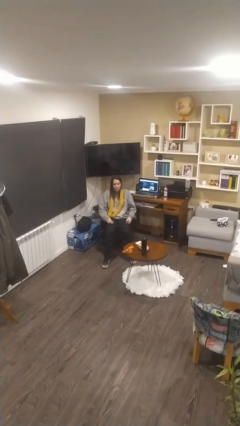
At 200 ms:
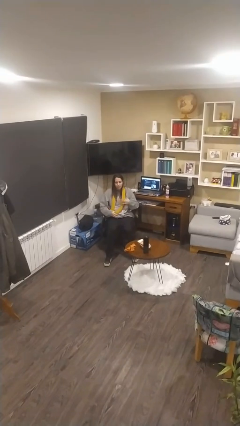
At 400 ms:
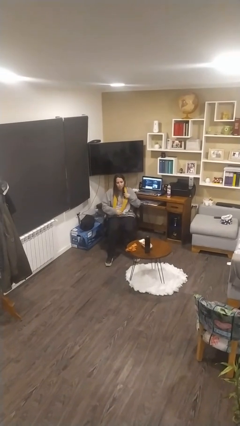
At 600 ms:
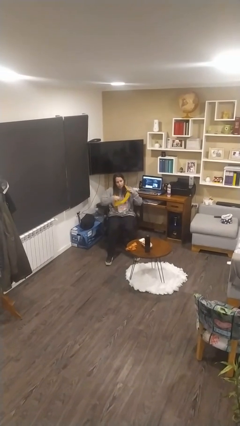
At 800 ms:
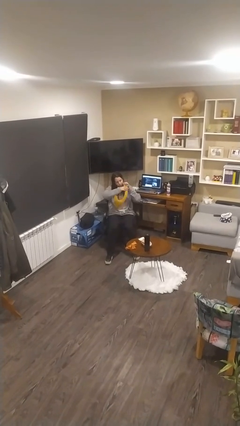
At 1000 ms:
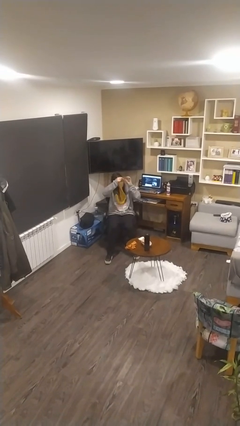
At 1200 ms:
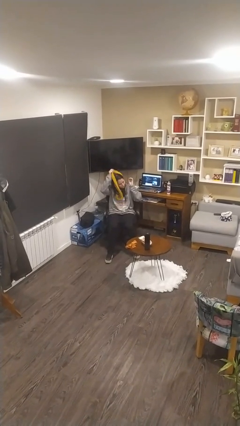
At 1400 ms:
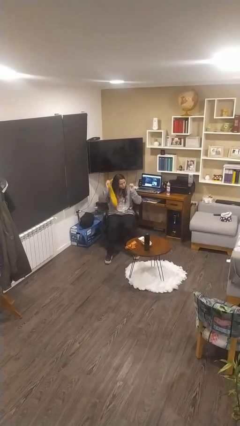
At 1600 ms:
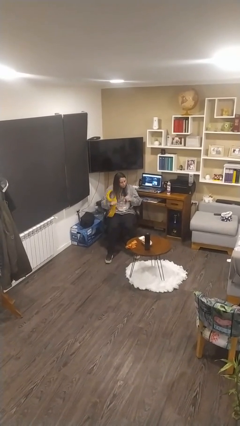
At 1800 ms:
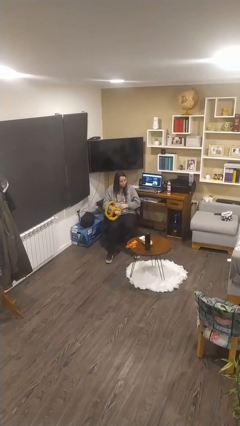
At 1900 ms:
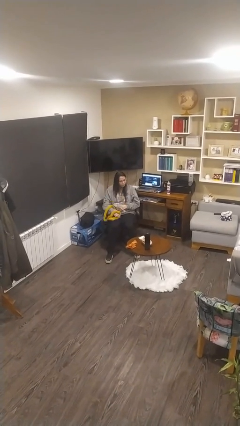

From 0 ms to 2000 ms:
person takes off scarf

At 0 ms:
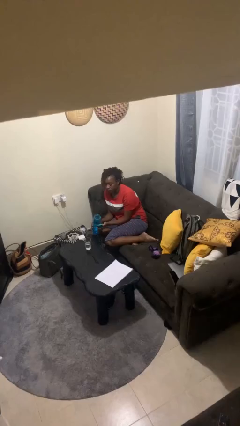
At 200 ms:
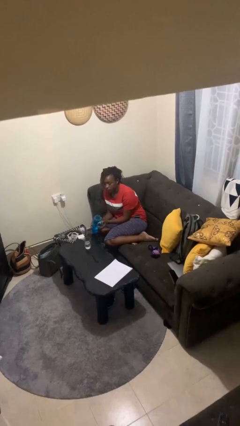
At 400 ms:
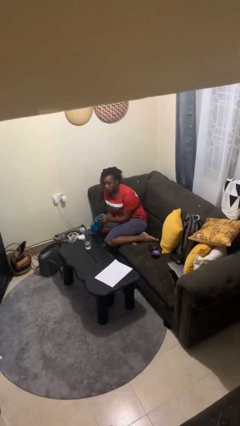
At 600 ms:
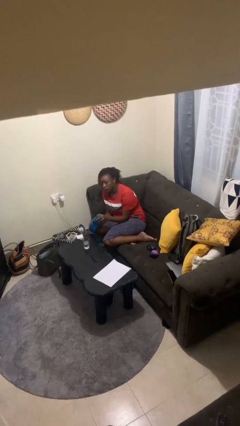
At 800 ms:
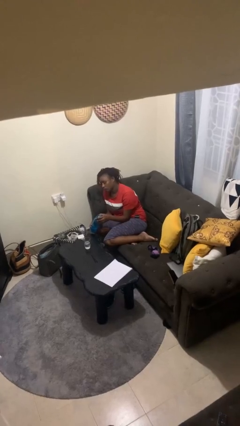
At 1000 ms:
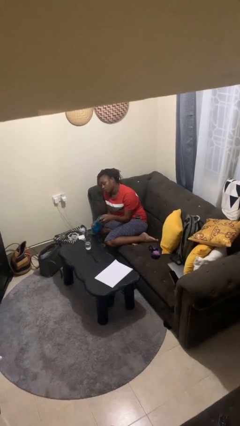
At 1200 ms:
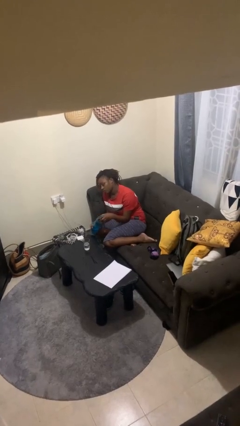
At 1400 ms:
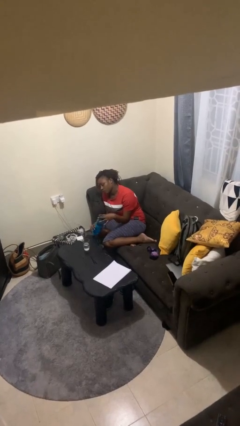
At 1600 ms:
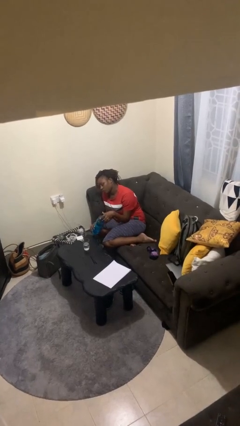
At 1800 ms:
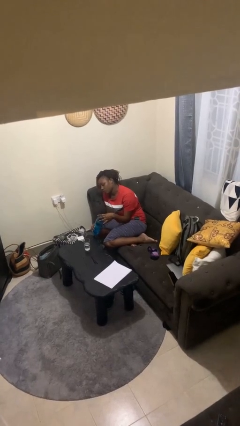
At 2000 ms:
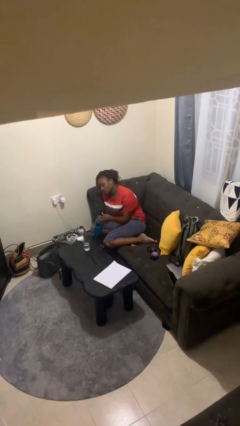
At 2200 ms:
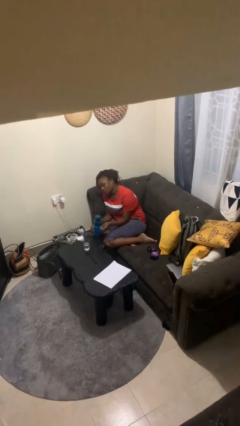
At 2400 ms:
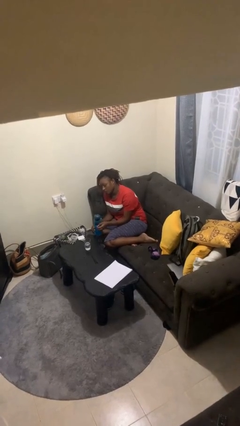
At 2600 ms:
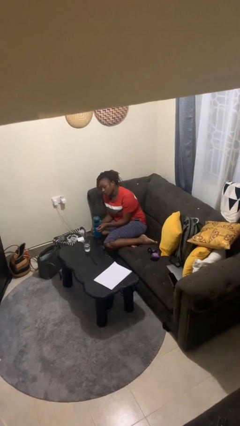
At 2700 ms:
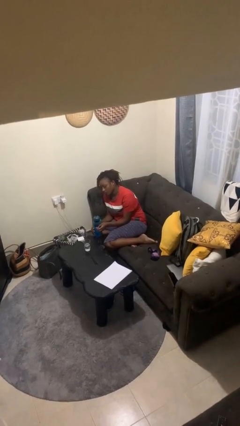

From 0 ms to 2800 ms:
person screws lid to bottle

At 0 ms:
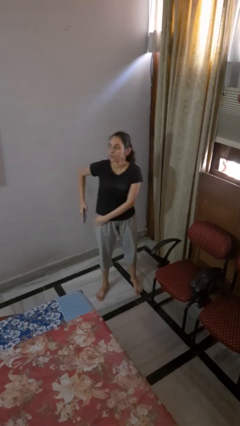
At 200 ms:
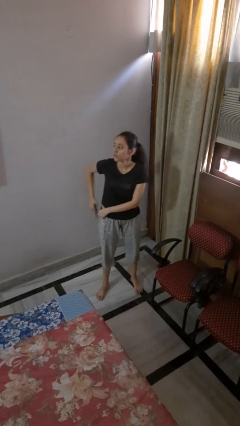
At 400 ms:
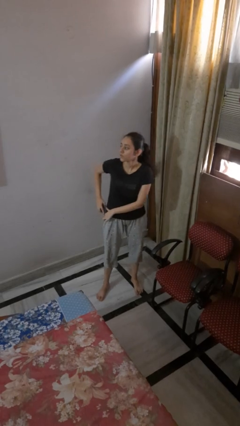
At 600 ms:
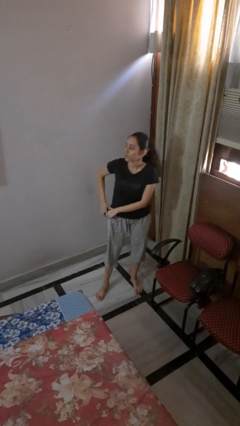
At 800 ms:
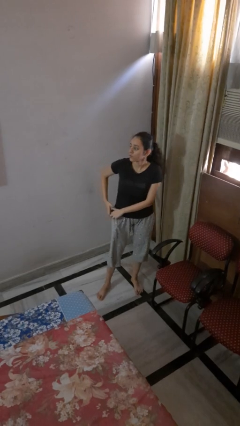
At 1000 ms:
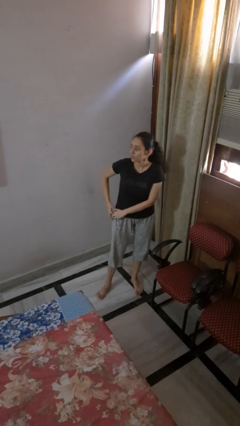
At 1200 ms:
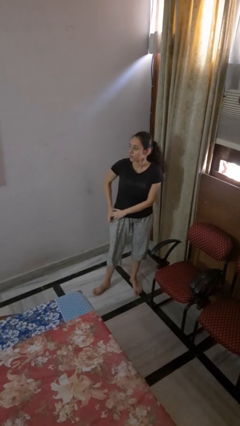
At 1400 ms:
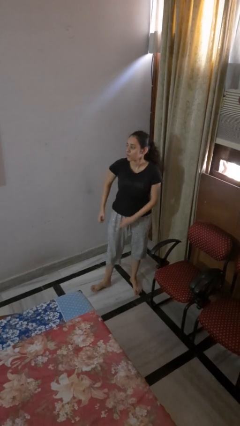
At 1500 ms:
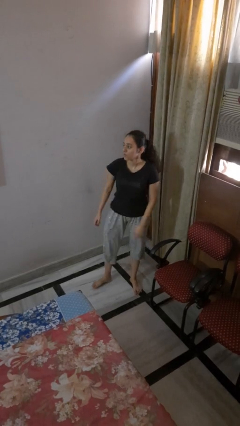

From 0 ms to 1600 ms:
person puts phone into pocket

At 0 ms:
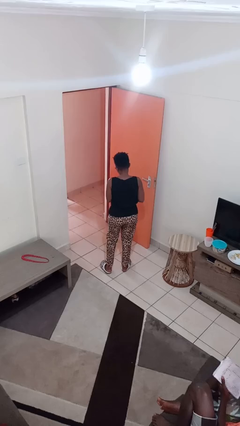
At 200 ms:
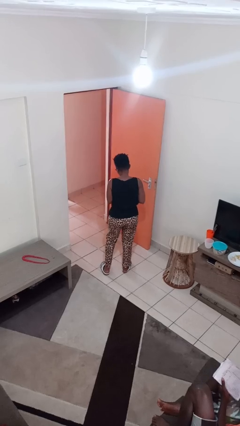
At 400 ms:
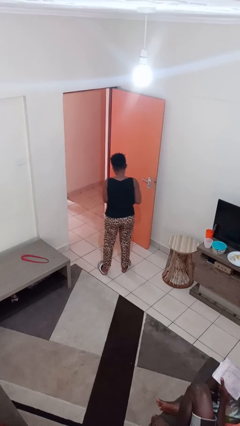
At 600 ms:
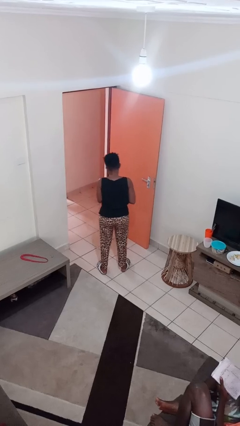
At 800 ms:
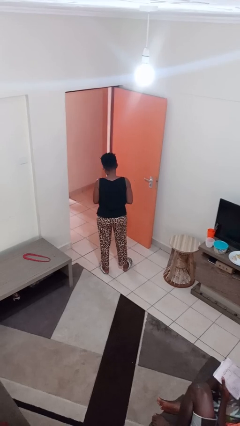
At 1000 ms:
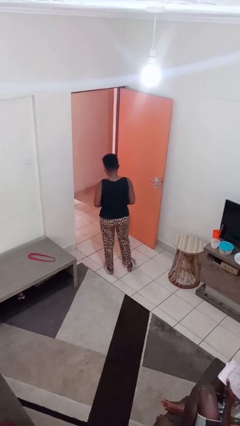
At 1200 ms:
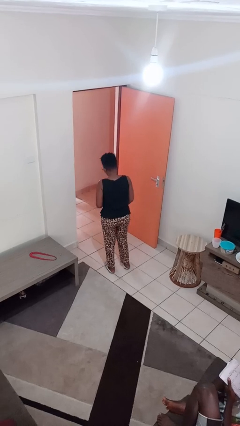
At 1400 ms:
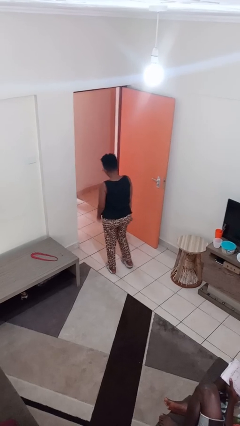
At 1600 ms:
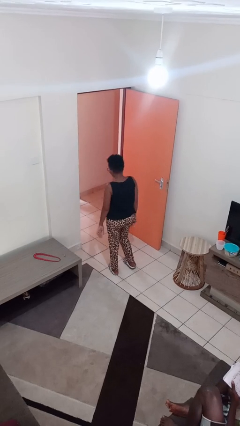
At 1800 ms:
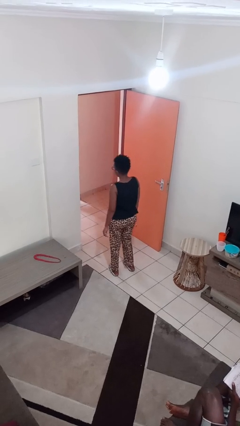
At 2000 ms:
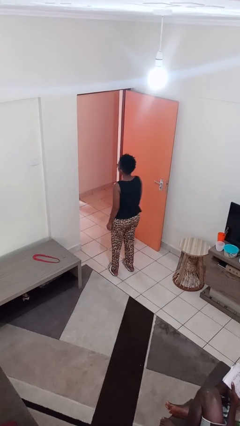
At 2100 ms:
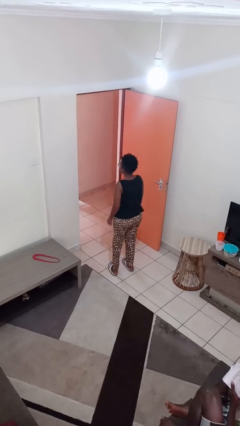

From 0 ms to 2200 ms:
person takes off wristwatch

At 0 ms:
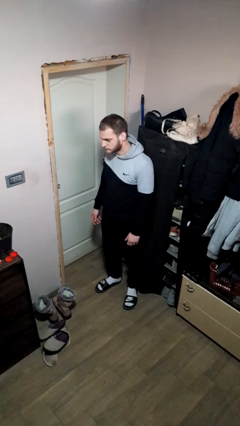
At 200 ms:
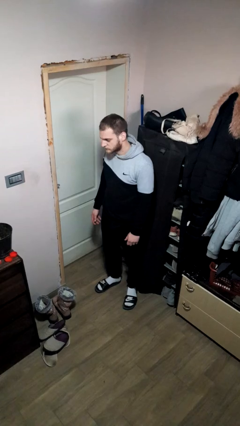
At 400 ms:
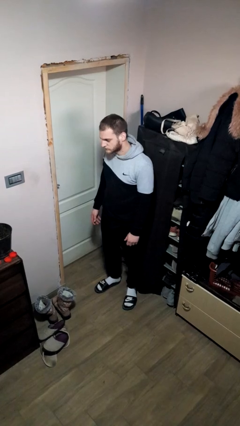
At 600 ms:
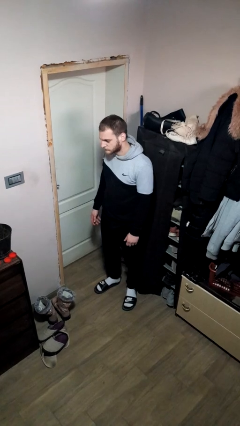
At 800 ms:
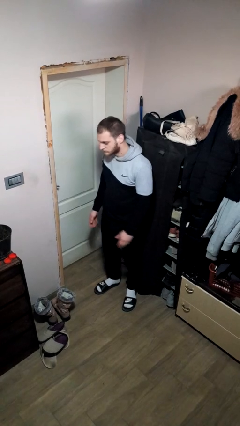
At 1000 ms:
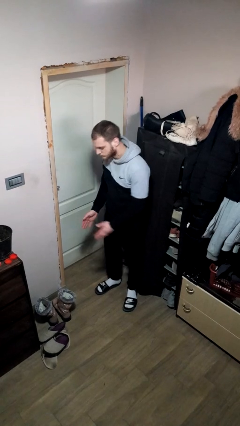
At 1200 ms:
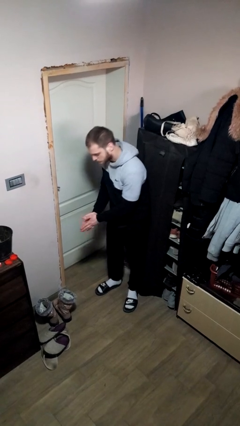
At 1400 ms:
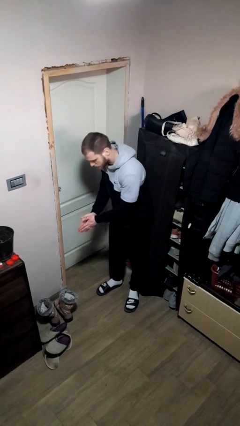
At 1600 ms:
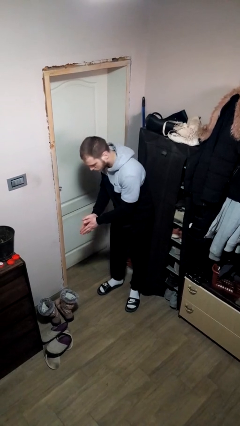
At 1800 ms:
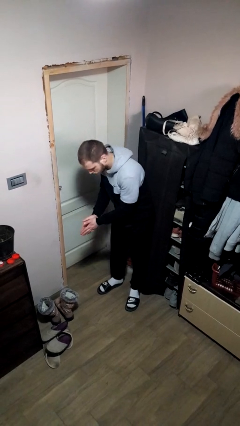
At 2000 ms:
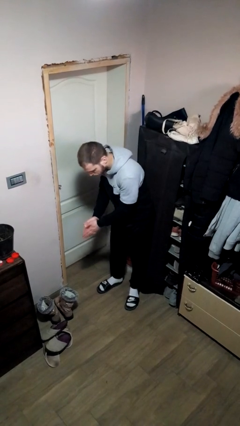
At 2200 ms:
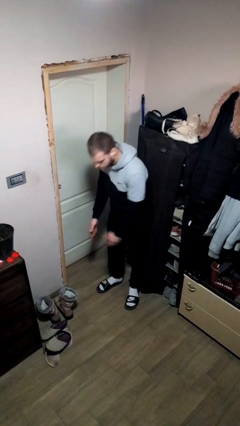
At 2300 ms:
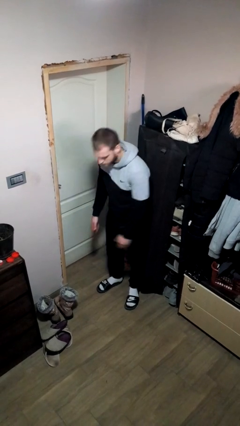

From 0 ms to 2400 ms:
person claps hands

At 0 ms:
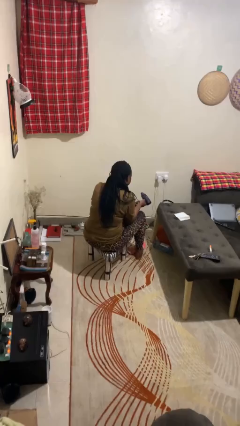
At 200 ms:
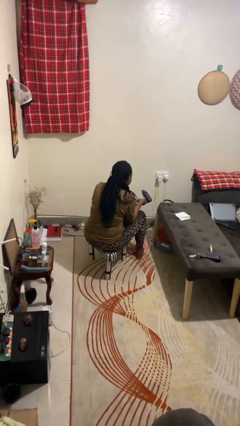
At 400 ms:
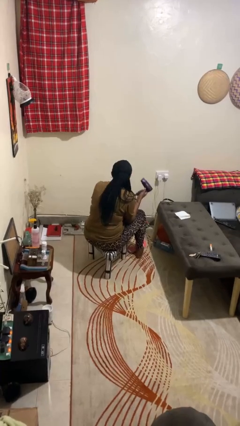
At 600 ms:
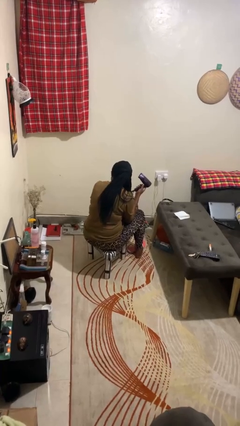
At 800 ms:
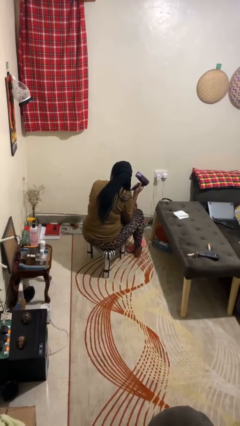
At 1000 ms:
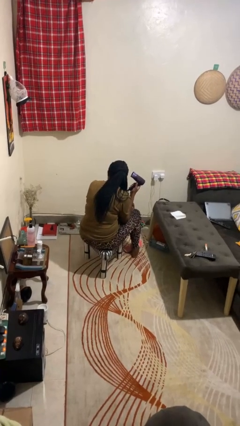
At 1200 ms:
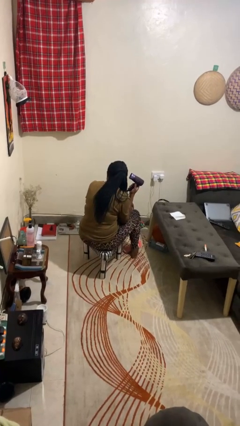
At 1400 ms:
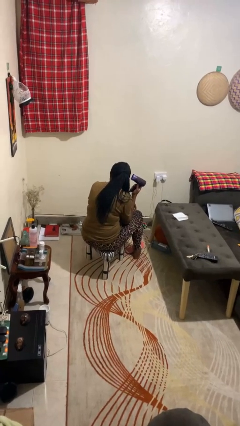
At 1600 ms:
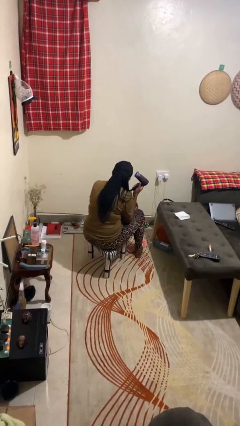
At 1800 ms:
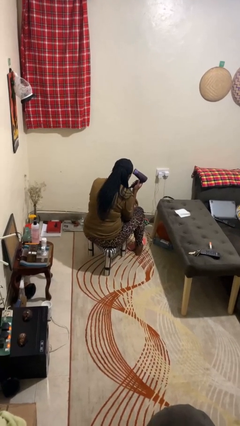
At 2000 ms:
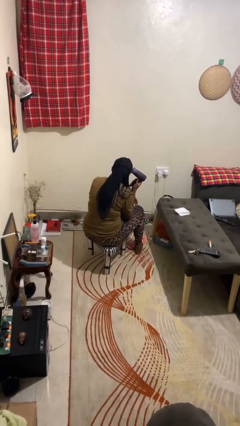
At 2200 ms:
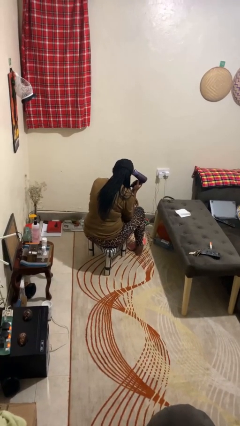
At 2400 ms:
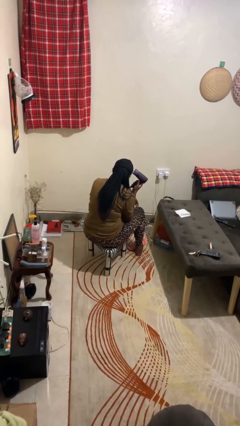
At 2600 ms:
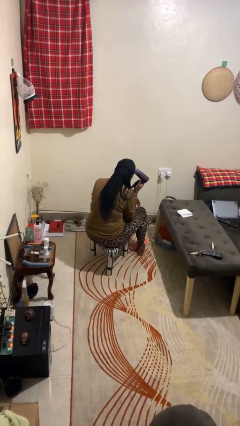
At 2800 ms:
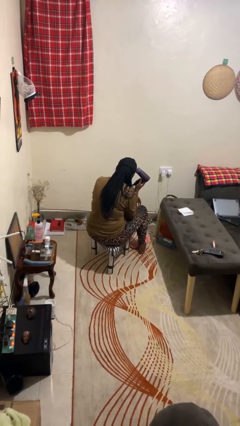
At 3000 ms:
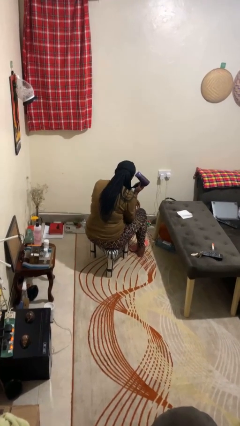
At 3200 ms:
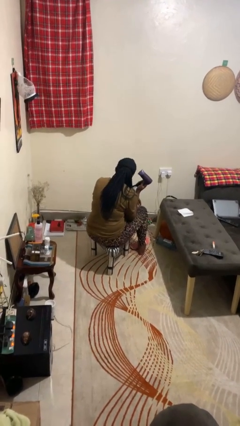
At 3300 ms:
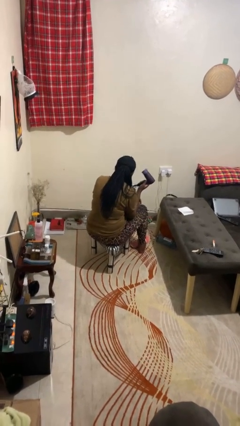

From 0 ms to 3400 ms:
person dries hair with hairdryer

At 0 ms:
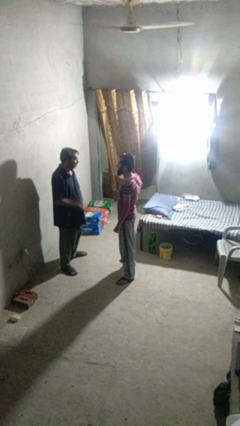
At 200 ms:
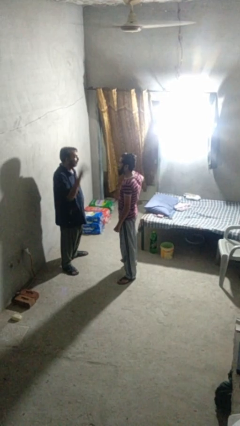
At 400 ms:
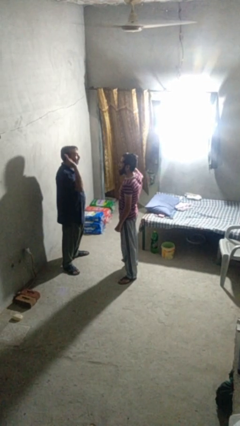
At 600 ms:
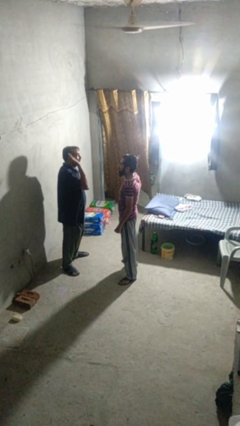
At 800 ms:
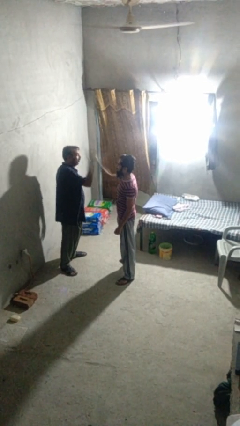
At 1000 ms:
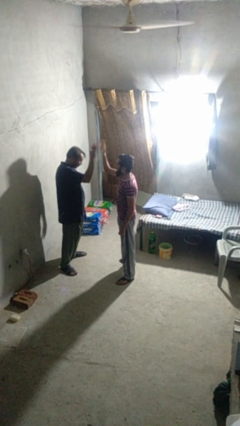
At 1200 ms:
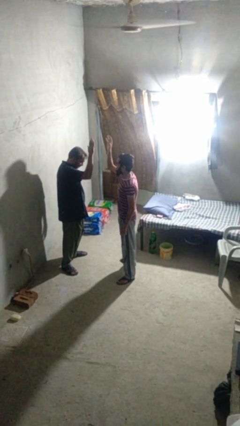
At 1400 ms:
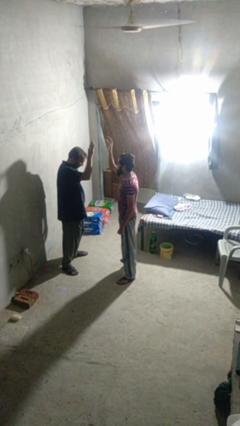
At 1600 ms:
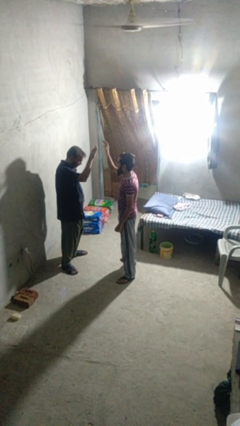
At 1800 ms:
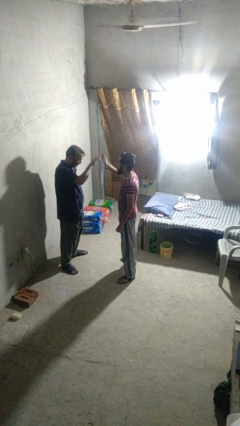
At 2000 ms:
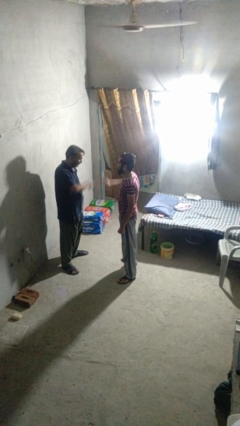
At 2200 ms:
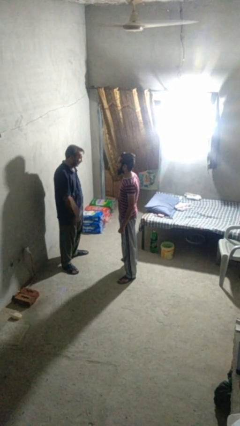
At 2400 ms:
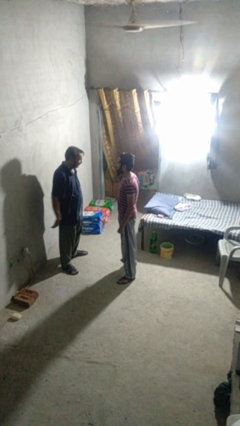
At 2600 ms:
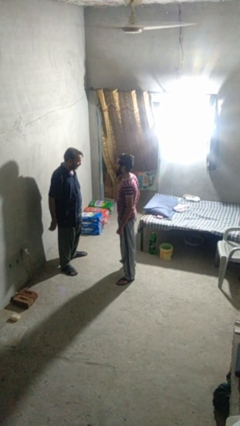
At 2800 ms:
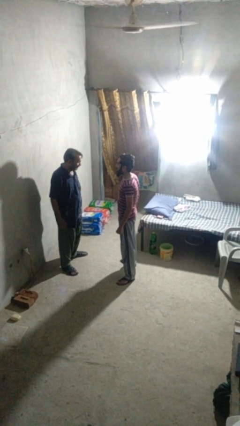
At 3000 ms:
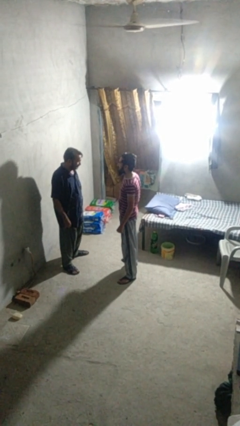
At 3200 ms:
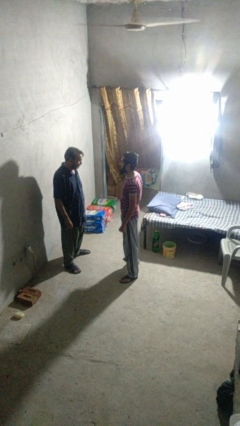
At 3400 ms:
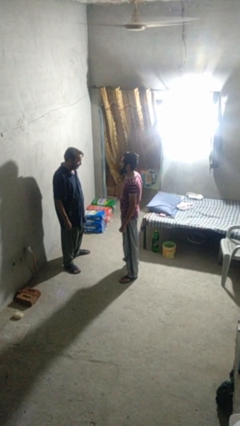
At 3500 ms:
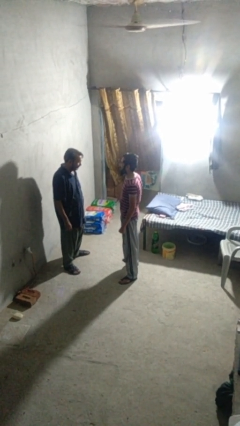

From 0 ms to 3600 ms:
person highfives hand
